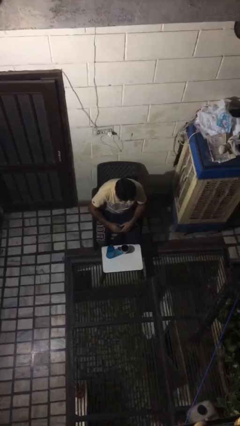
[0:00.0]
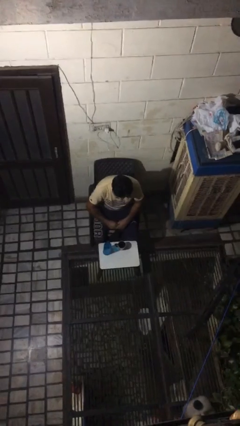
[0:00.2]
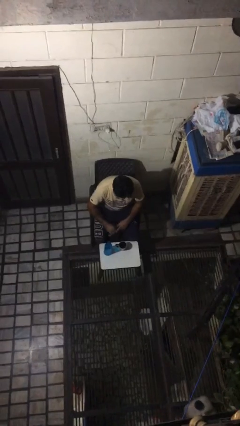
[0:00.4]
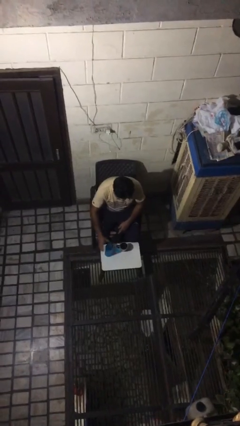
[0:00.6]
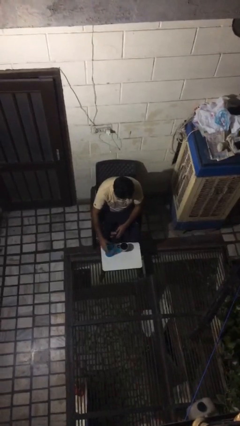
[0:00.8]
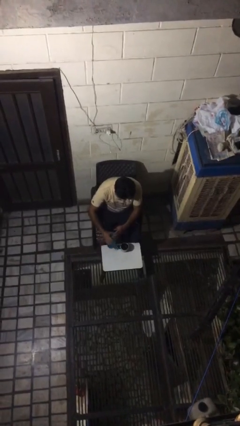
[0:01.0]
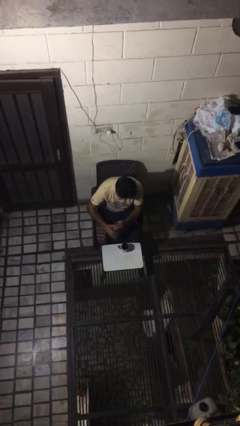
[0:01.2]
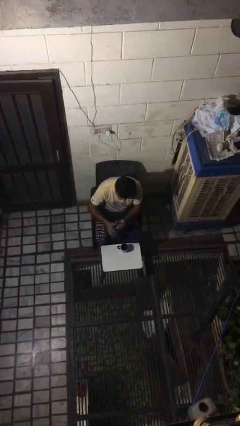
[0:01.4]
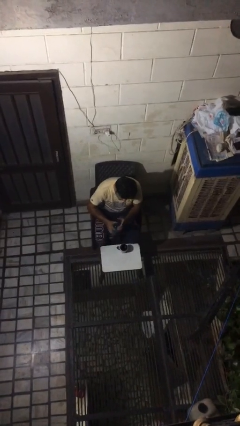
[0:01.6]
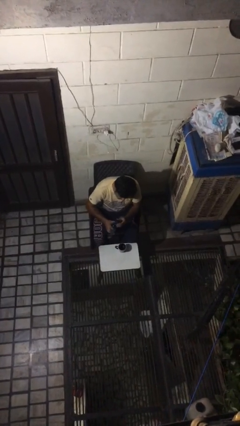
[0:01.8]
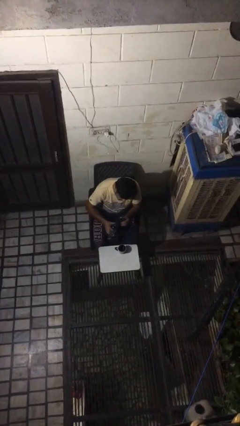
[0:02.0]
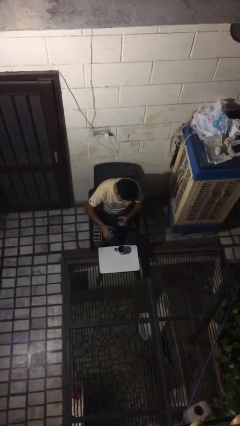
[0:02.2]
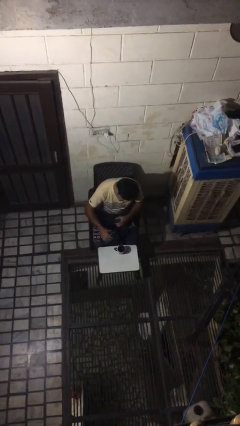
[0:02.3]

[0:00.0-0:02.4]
person unscrews lid from bottle

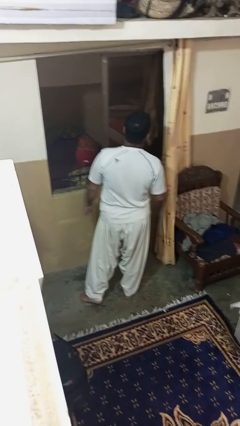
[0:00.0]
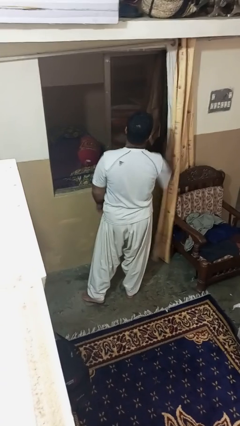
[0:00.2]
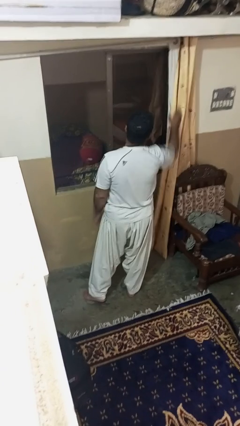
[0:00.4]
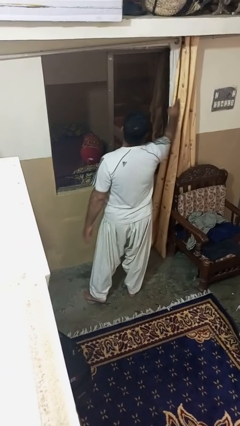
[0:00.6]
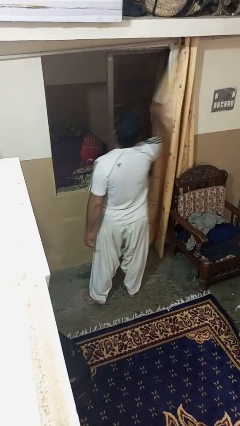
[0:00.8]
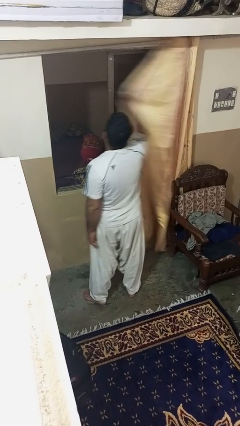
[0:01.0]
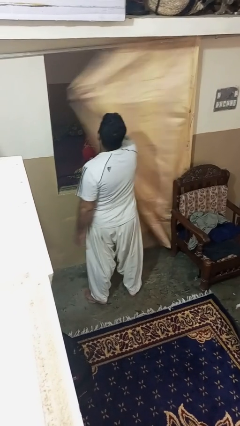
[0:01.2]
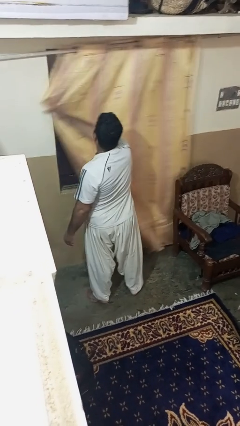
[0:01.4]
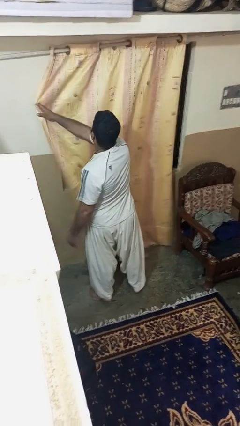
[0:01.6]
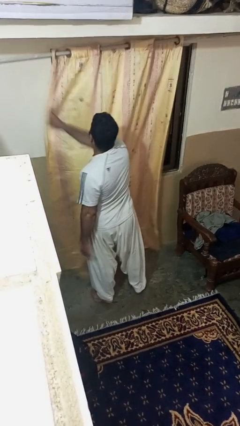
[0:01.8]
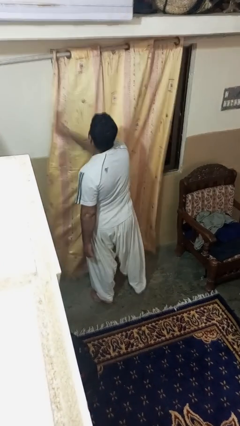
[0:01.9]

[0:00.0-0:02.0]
person closes curtains

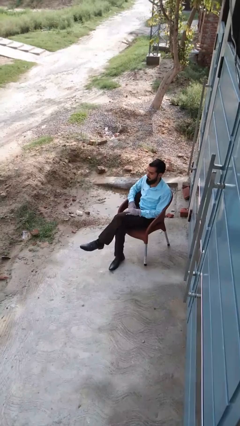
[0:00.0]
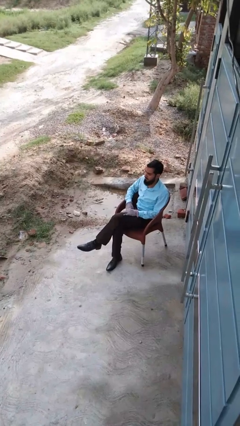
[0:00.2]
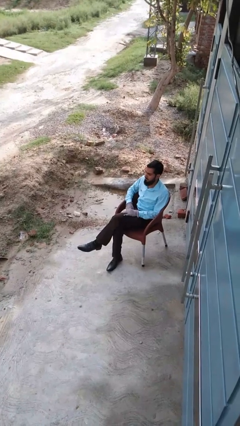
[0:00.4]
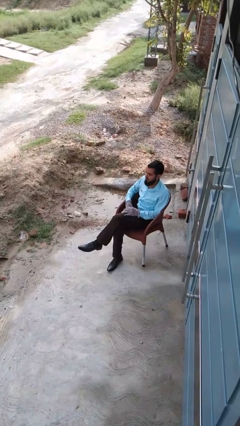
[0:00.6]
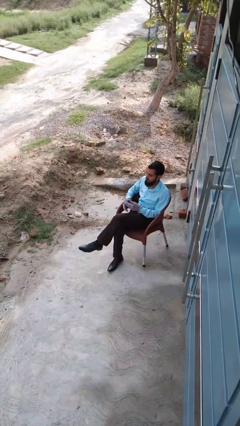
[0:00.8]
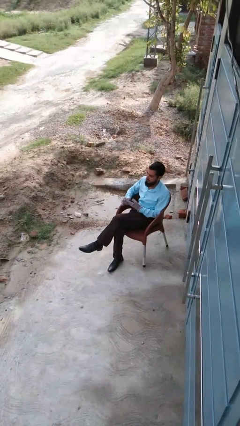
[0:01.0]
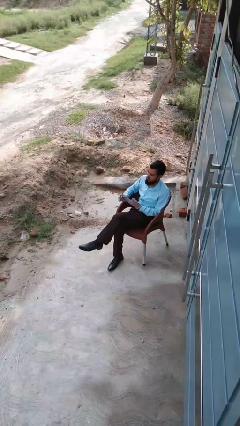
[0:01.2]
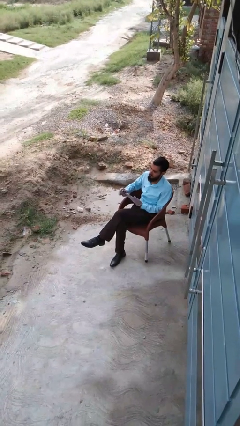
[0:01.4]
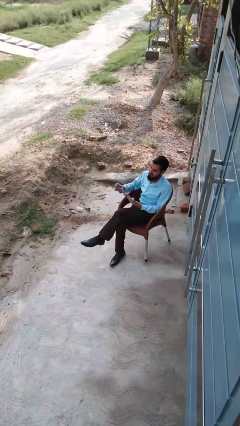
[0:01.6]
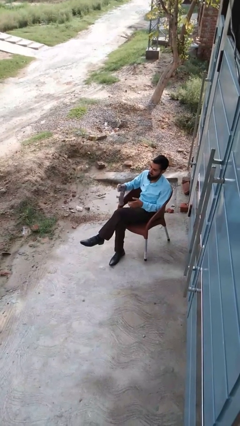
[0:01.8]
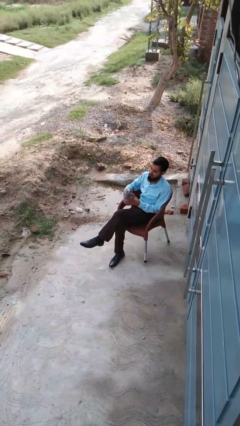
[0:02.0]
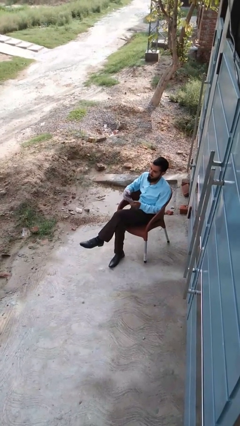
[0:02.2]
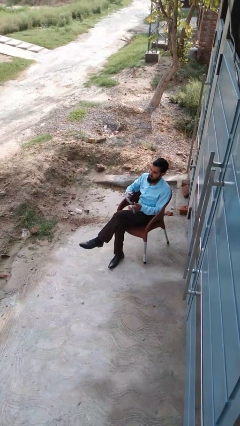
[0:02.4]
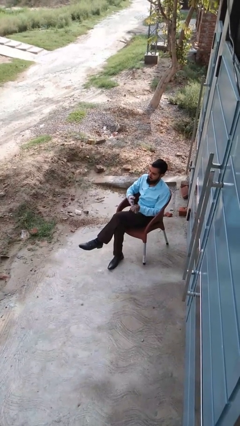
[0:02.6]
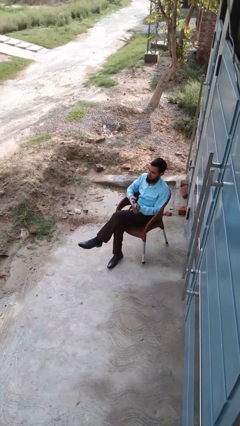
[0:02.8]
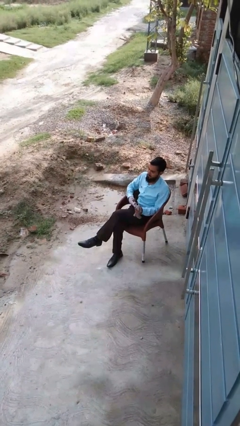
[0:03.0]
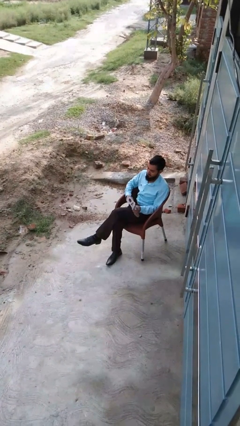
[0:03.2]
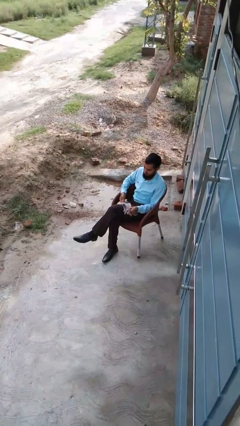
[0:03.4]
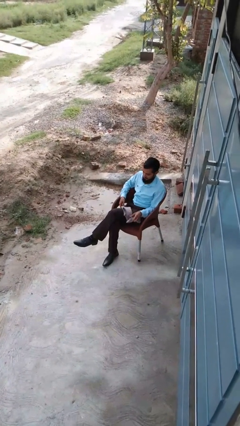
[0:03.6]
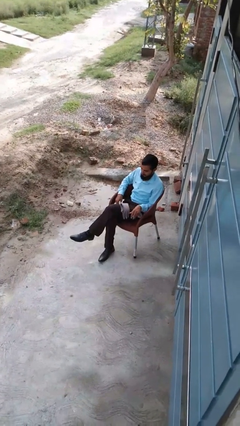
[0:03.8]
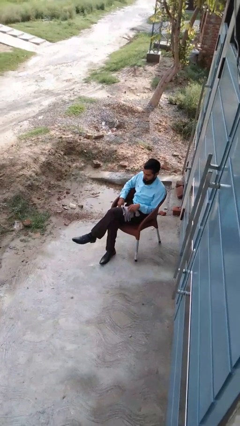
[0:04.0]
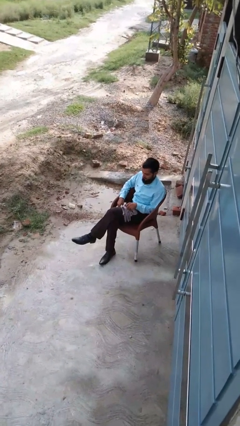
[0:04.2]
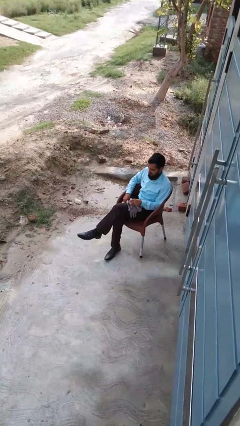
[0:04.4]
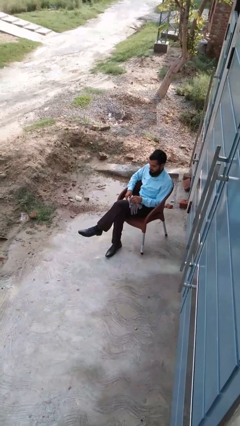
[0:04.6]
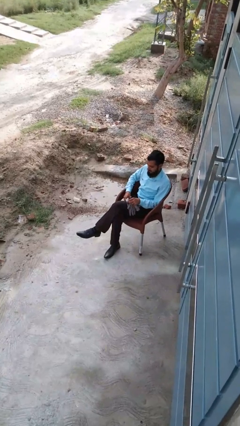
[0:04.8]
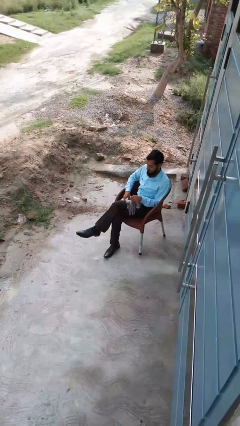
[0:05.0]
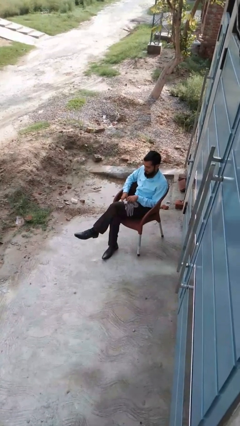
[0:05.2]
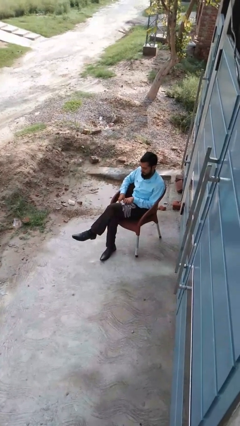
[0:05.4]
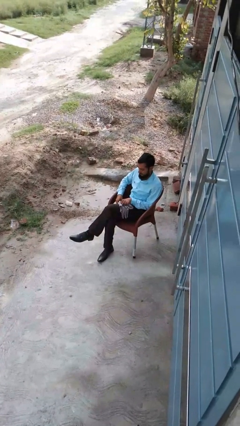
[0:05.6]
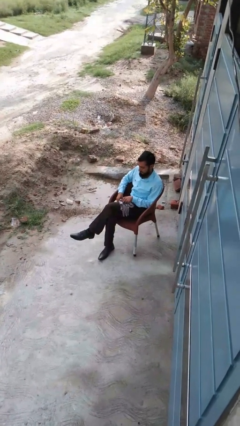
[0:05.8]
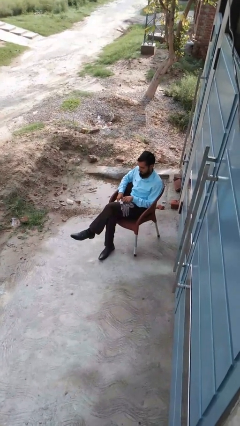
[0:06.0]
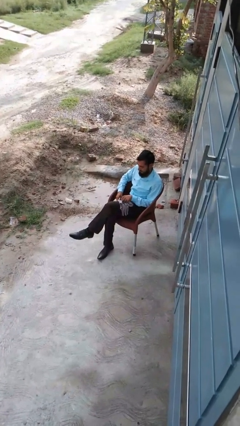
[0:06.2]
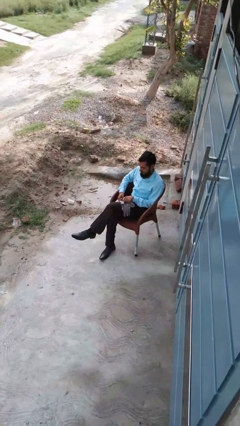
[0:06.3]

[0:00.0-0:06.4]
person takes off gloves

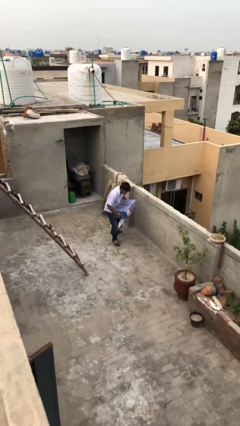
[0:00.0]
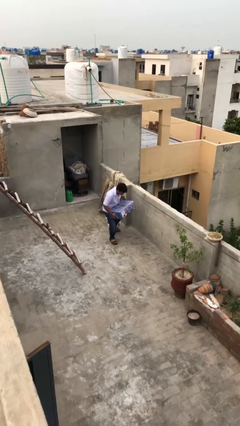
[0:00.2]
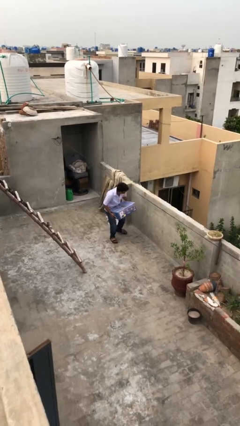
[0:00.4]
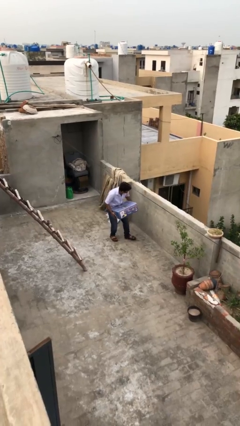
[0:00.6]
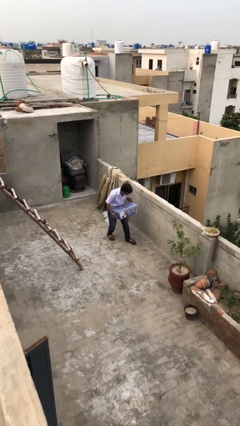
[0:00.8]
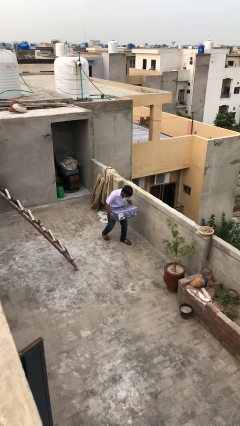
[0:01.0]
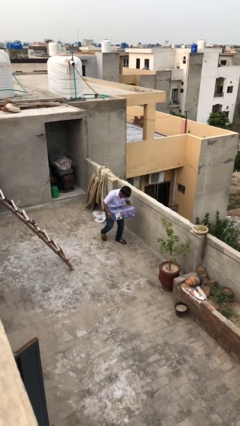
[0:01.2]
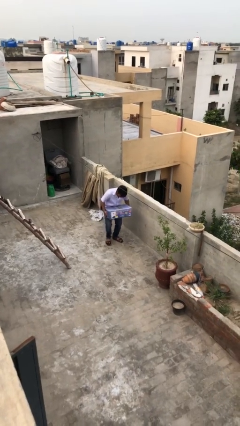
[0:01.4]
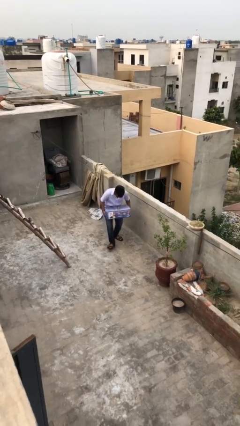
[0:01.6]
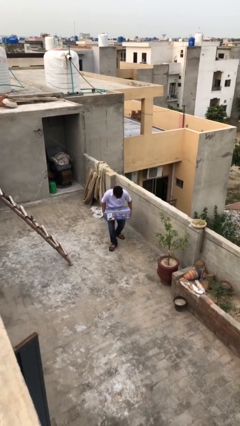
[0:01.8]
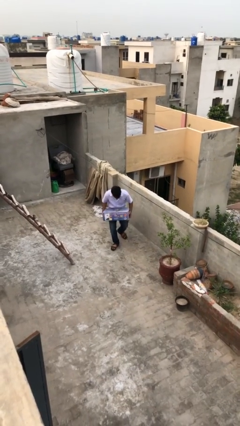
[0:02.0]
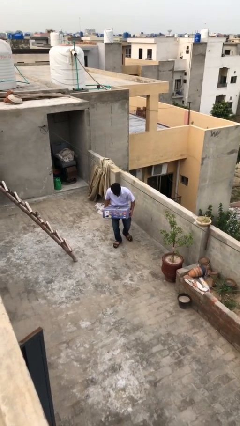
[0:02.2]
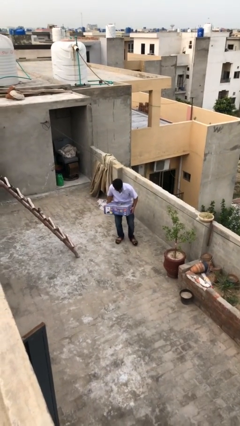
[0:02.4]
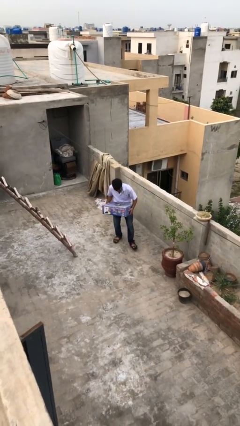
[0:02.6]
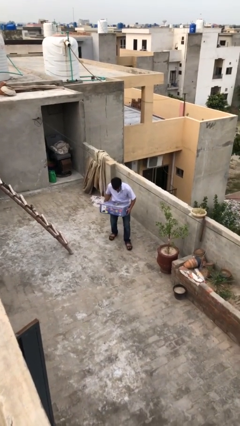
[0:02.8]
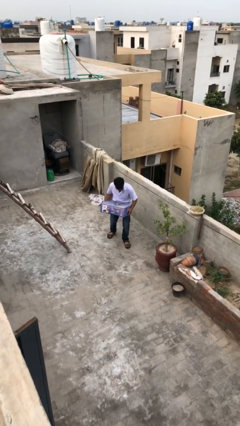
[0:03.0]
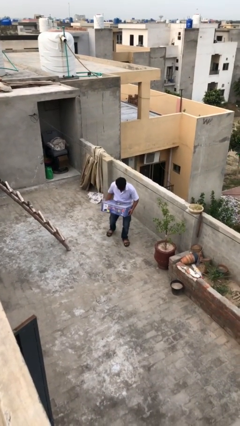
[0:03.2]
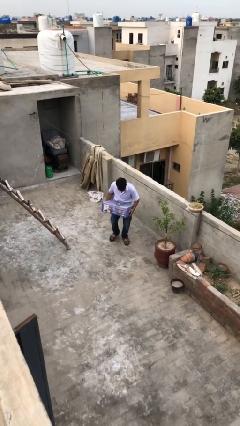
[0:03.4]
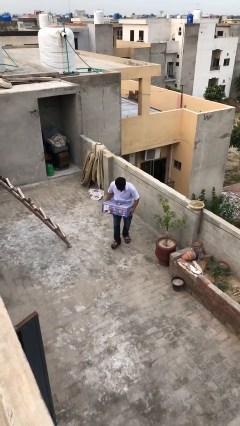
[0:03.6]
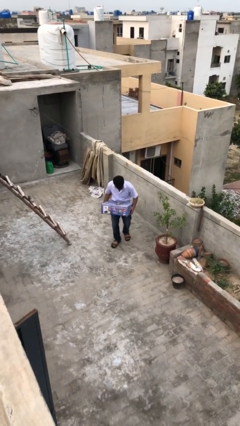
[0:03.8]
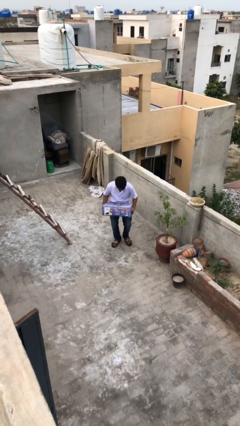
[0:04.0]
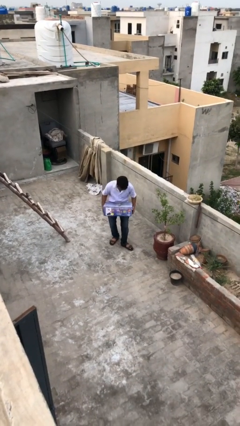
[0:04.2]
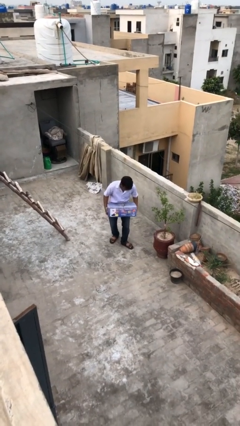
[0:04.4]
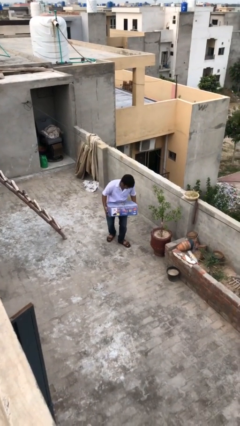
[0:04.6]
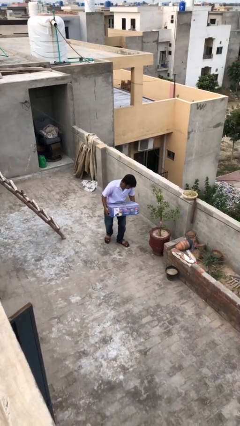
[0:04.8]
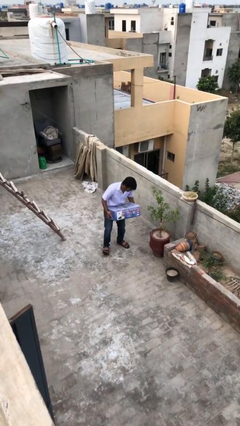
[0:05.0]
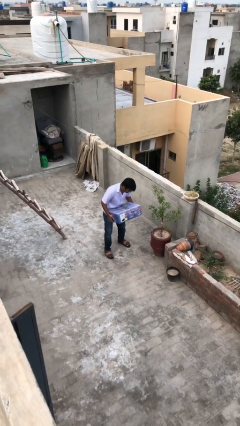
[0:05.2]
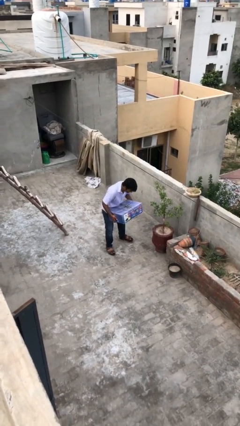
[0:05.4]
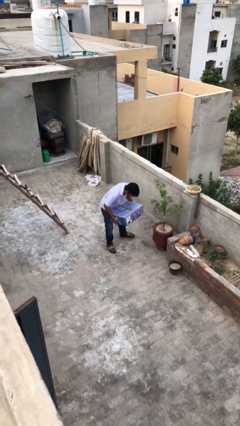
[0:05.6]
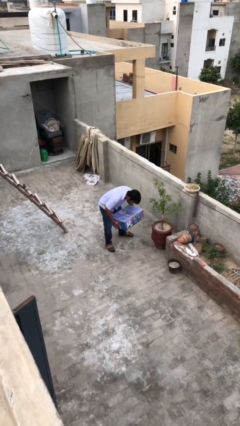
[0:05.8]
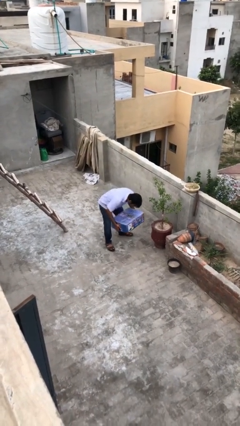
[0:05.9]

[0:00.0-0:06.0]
person carries heavy object

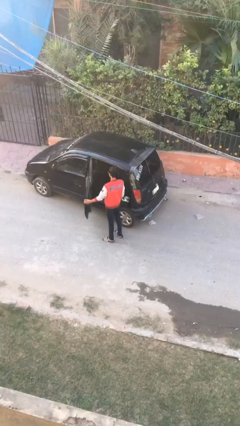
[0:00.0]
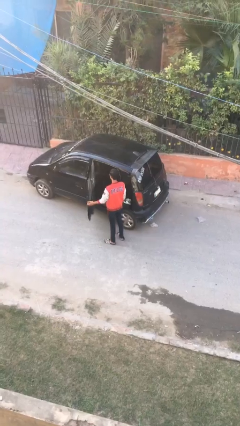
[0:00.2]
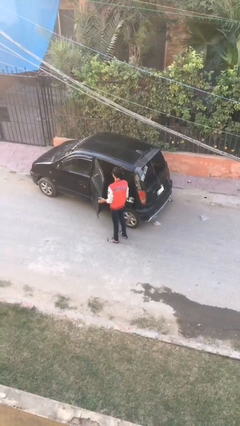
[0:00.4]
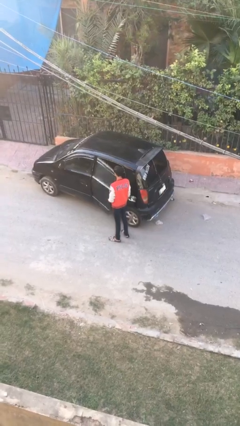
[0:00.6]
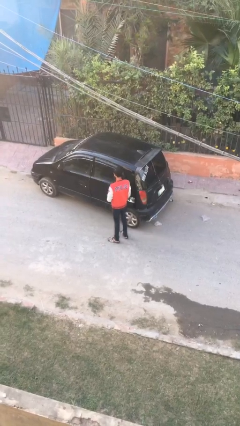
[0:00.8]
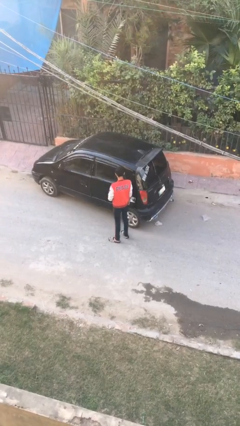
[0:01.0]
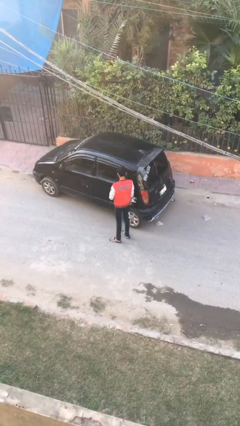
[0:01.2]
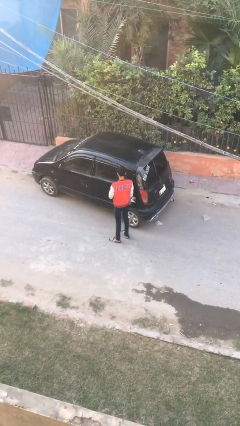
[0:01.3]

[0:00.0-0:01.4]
person closes car door
